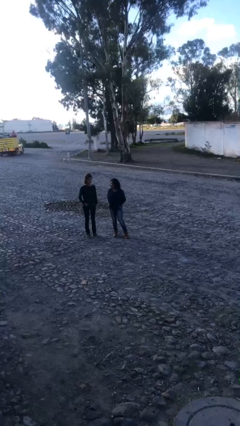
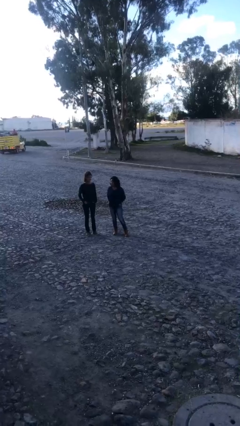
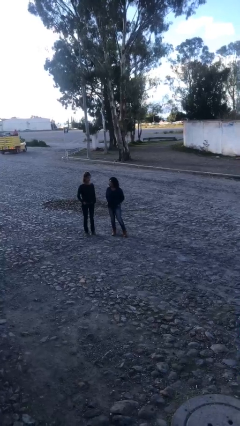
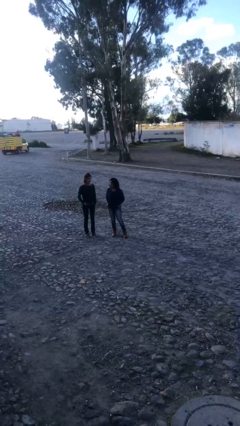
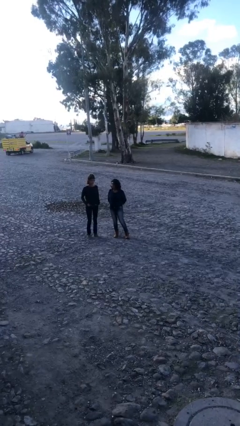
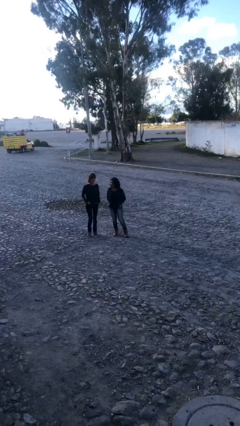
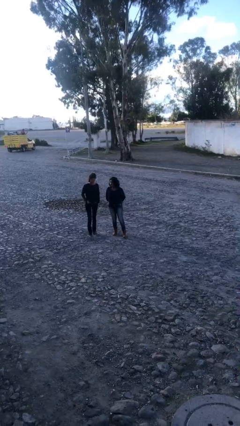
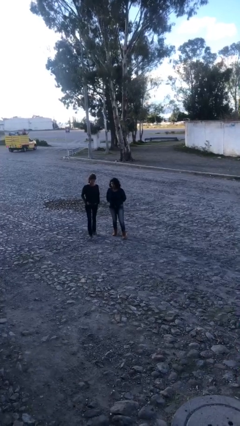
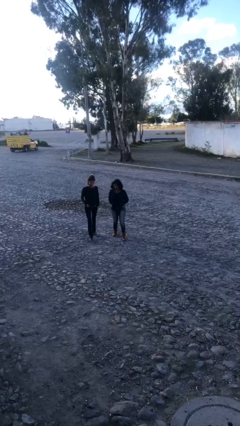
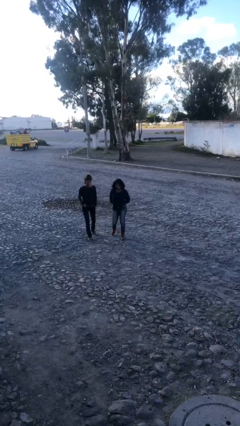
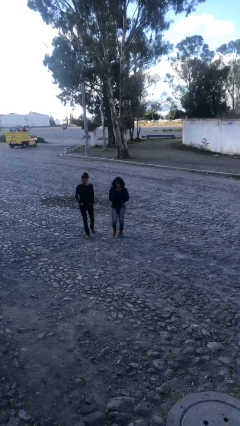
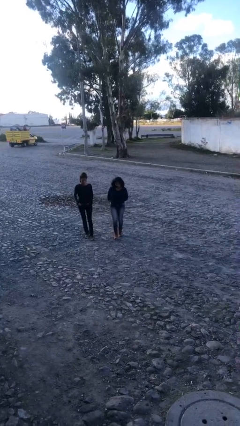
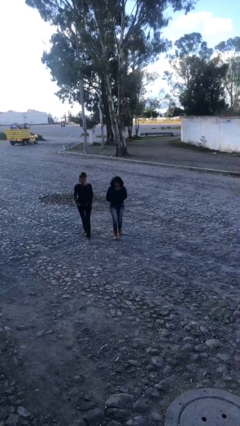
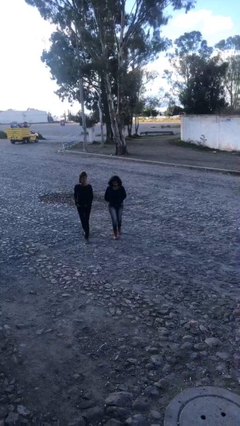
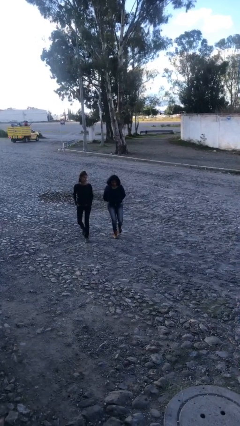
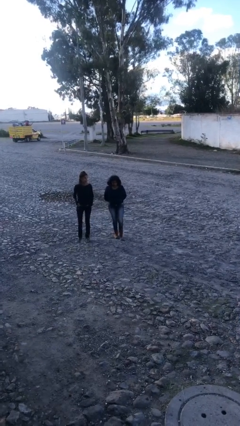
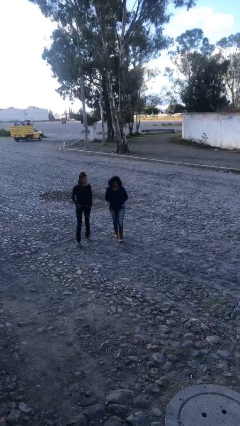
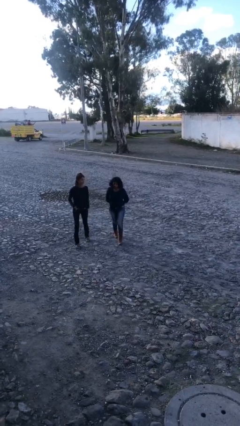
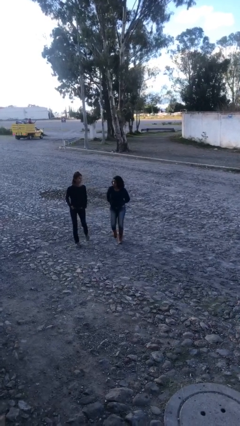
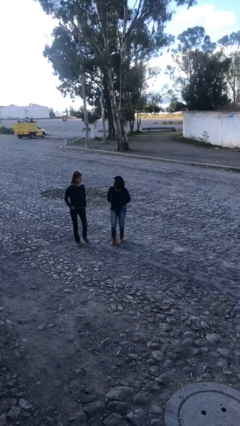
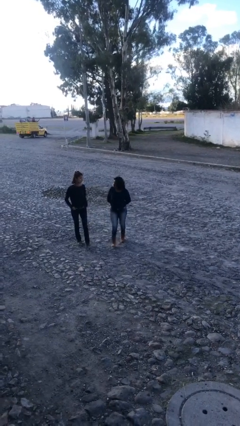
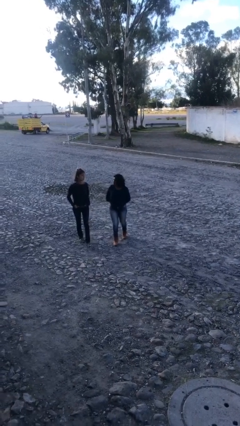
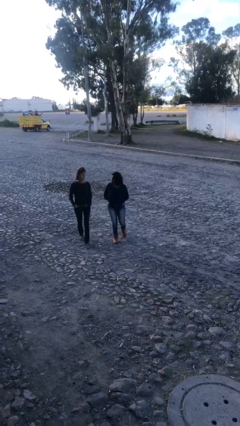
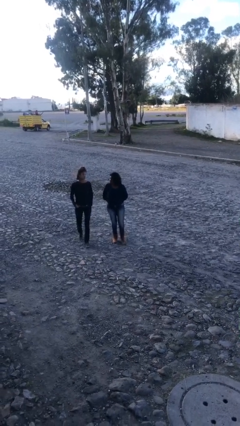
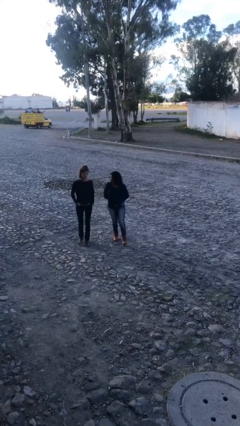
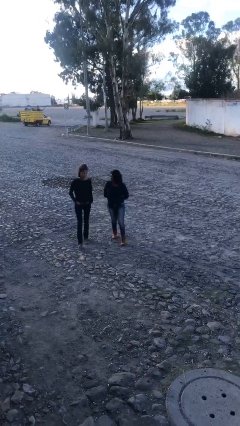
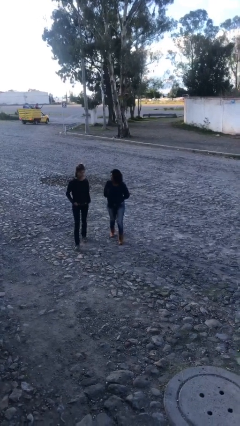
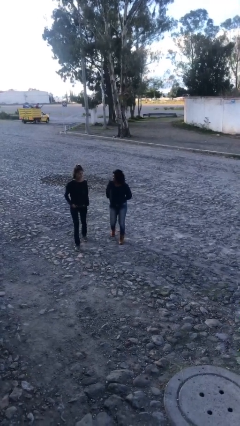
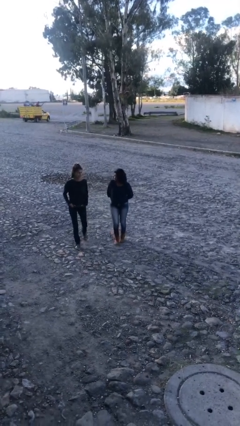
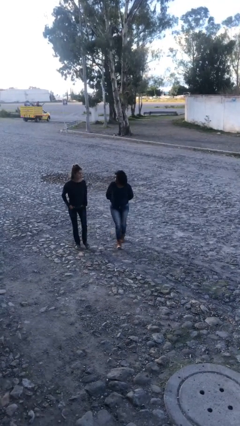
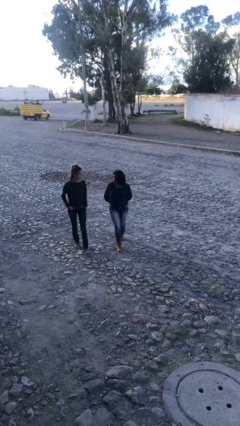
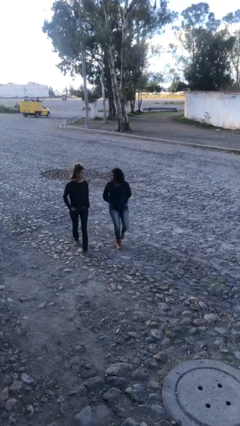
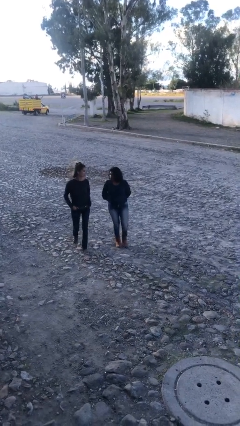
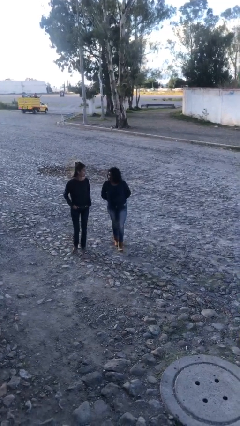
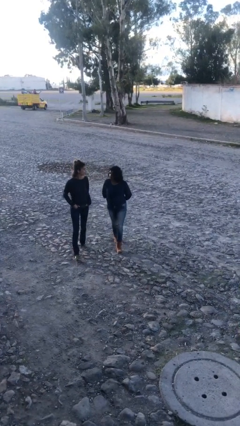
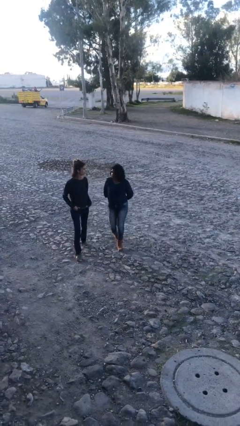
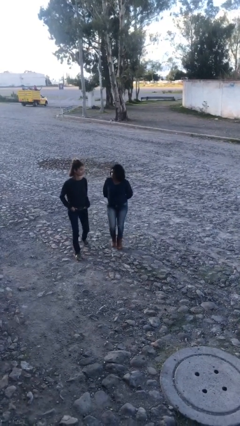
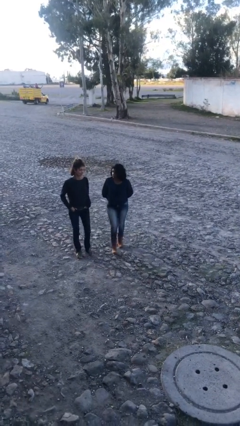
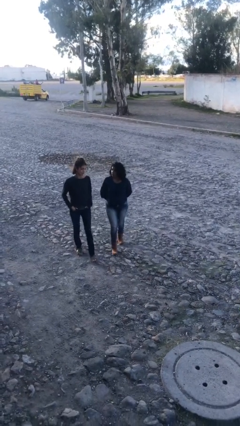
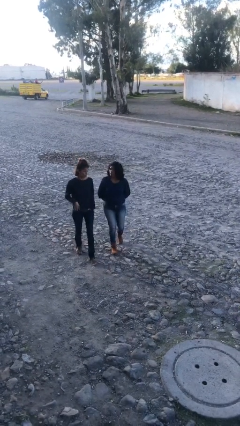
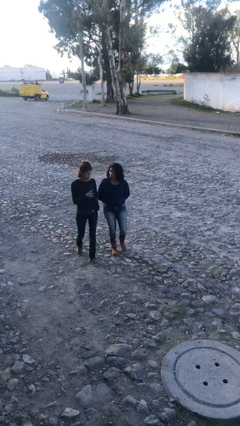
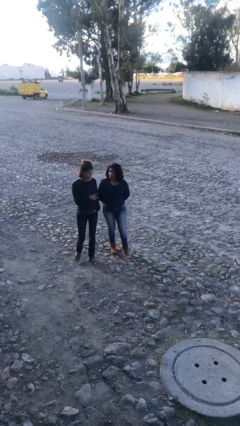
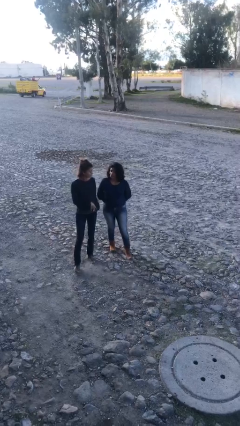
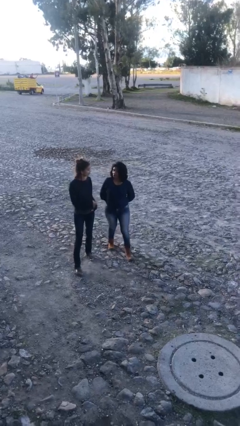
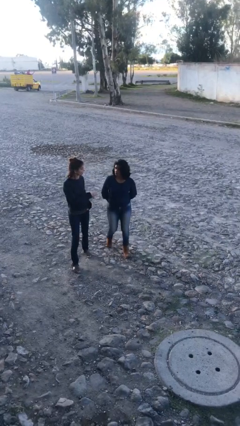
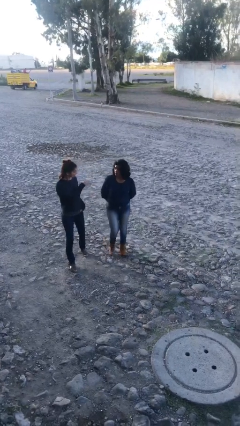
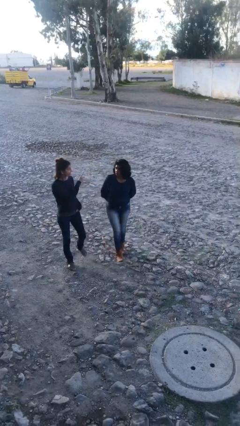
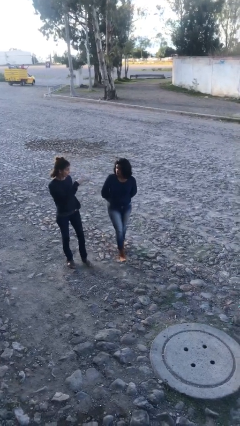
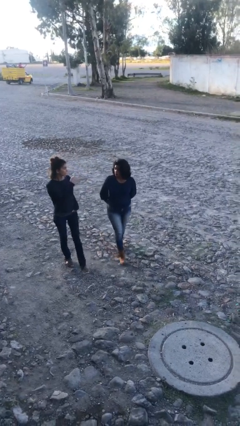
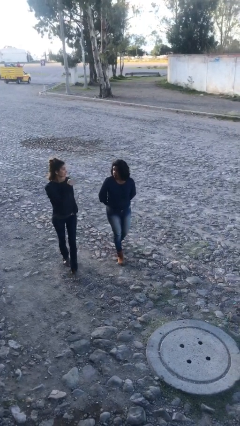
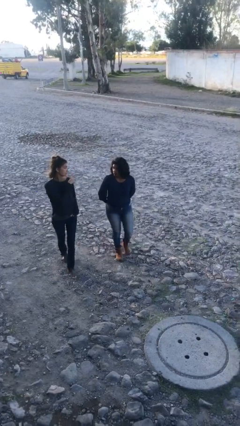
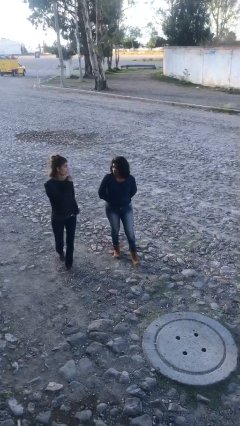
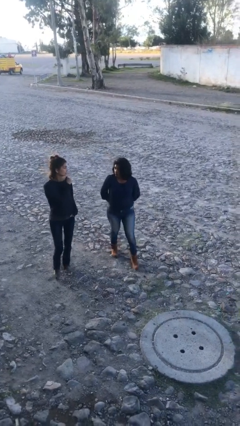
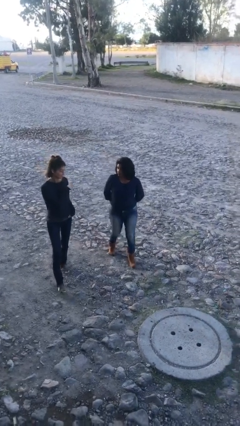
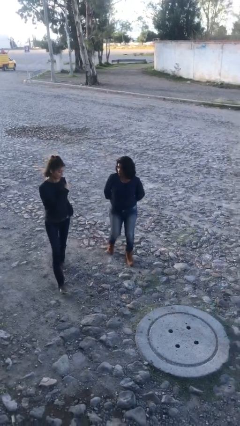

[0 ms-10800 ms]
person talks to person

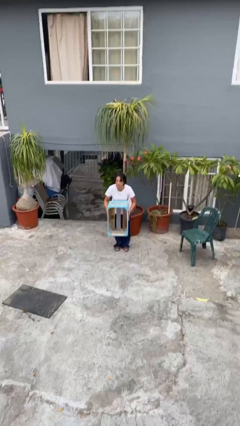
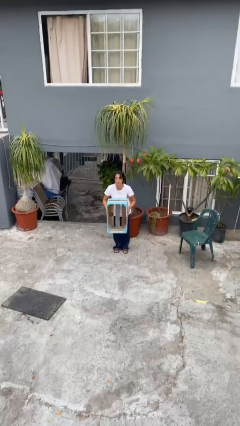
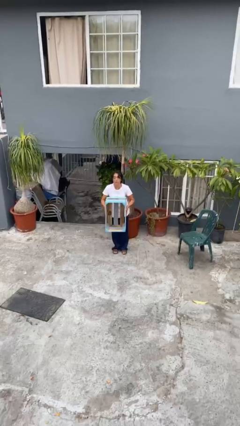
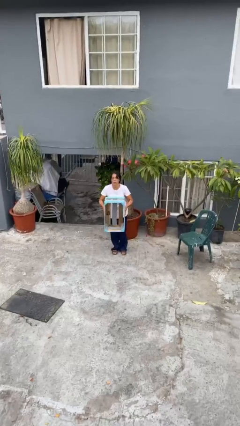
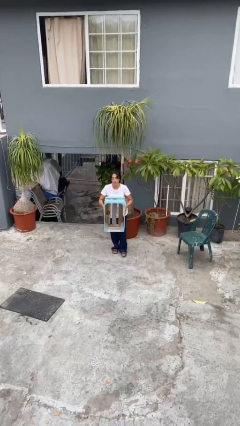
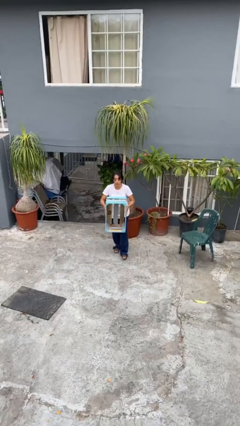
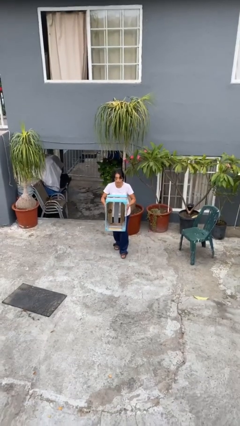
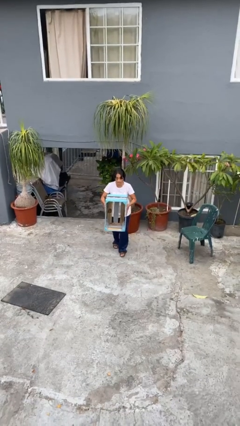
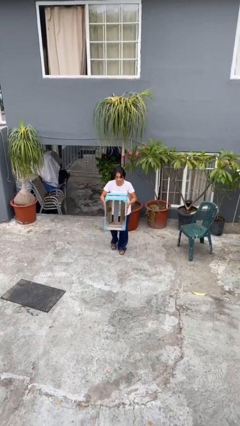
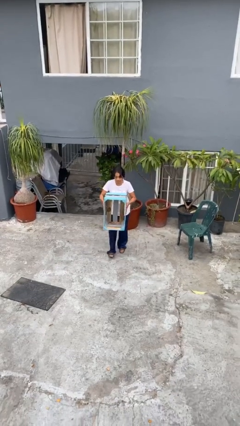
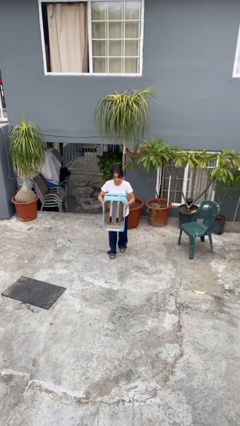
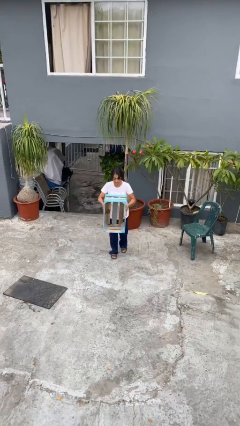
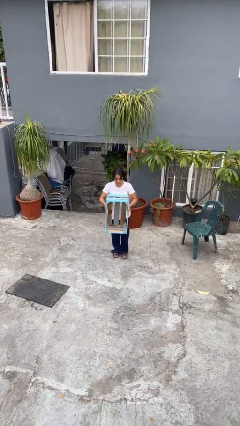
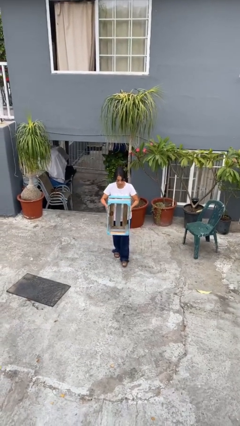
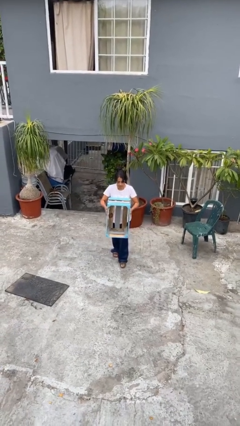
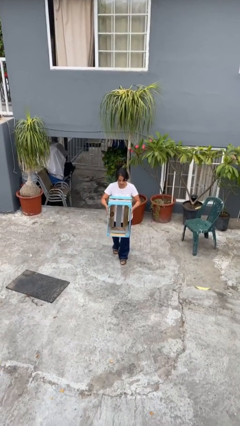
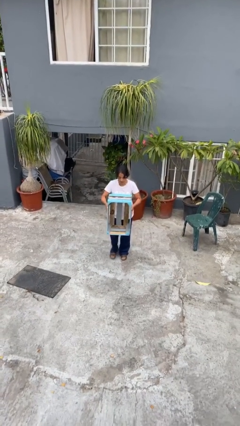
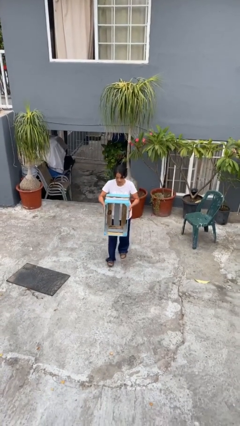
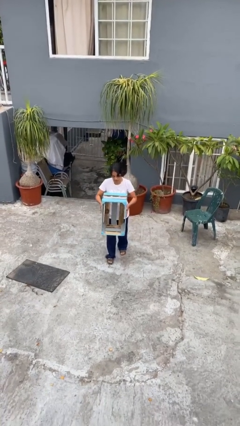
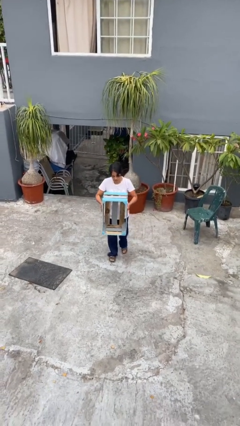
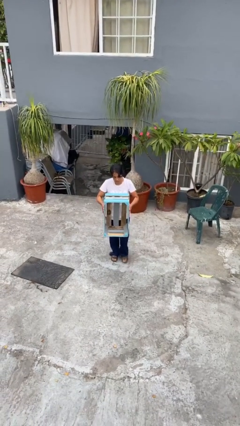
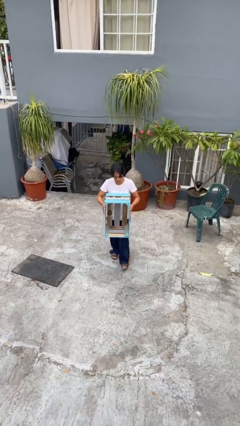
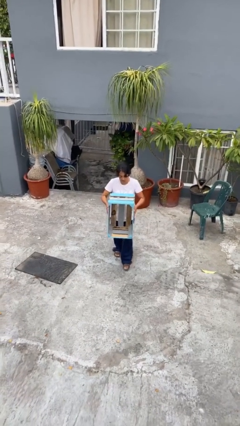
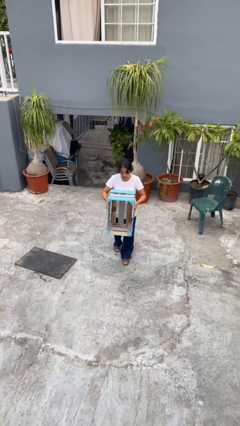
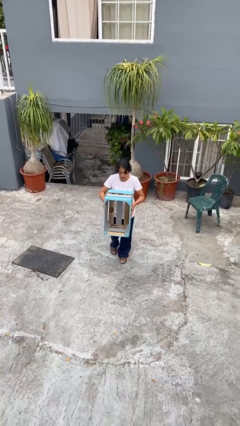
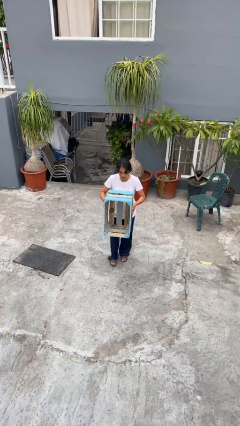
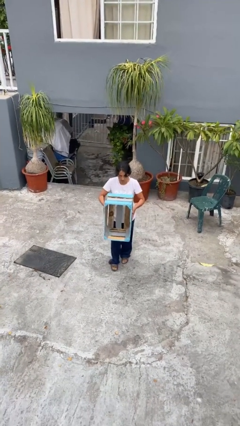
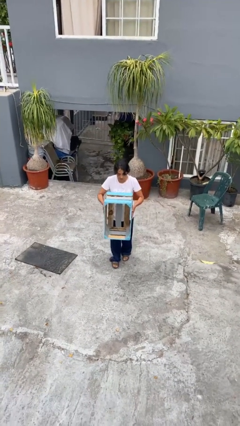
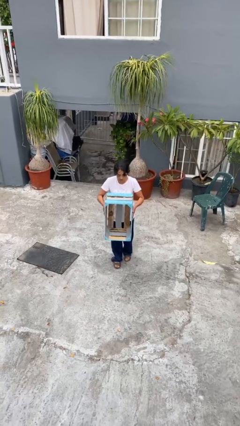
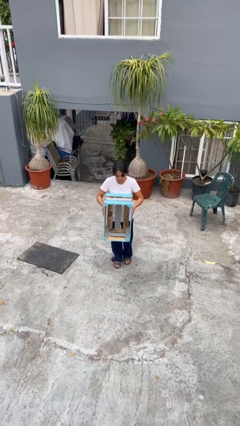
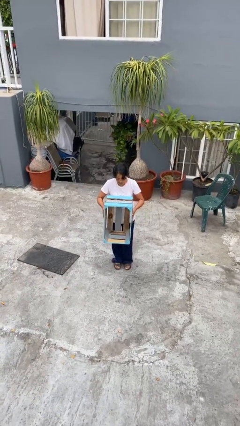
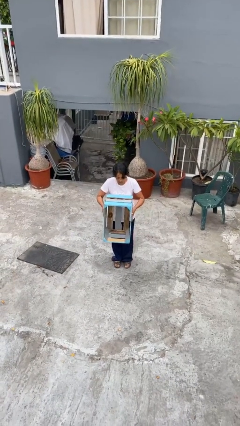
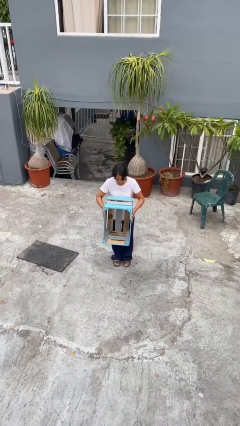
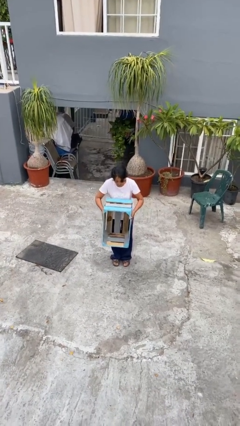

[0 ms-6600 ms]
person carries heavy object

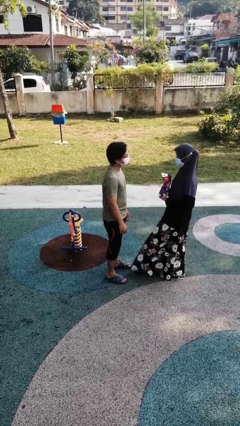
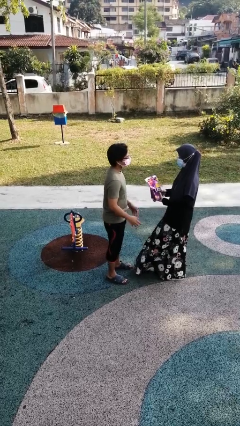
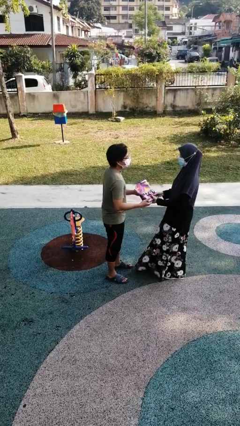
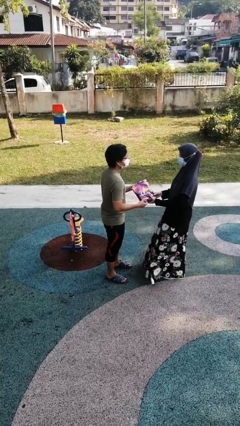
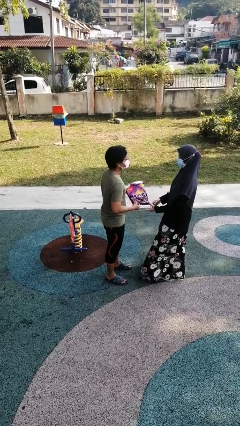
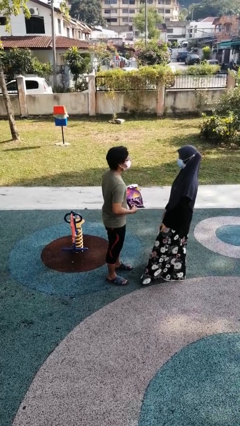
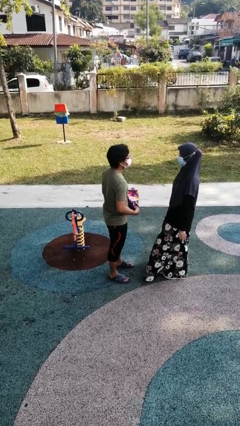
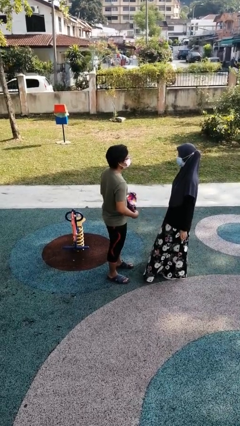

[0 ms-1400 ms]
person transfers object to person
